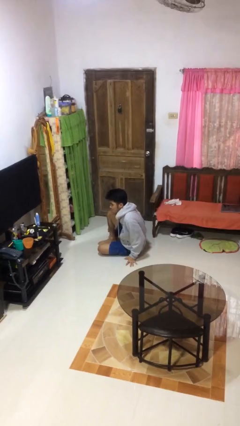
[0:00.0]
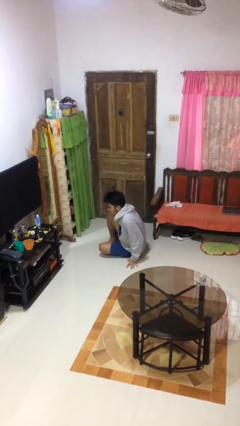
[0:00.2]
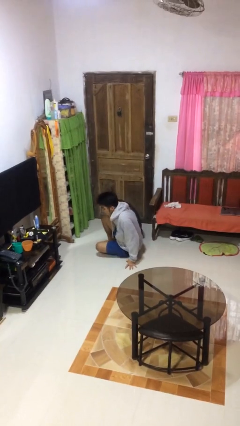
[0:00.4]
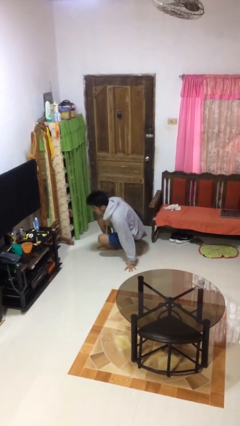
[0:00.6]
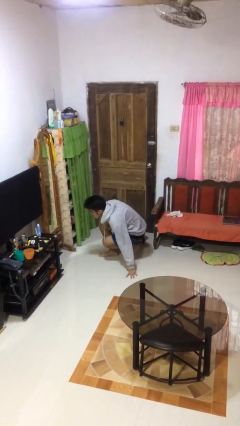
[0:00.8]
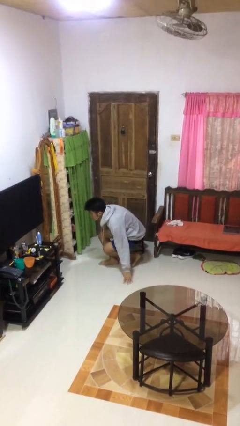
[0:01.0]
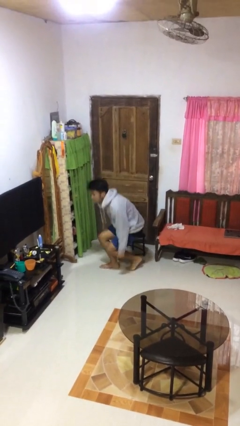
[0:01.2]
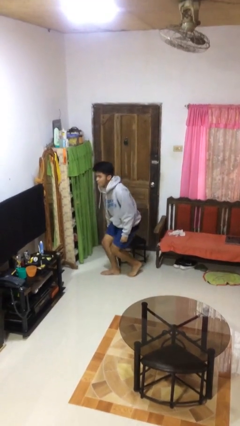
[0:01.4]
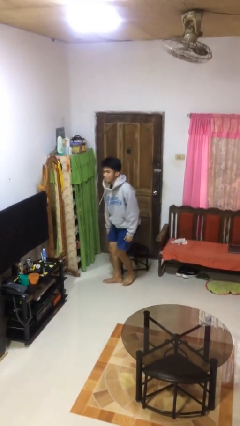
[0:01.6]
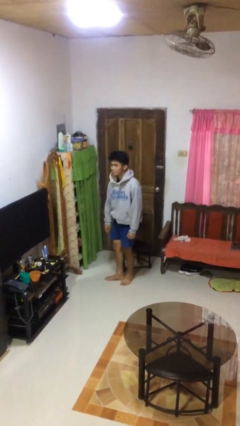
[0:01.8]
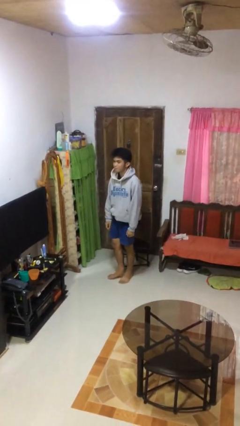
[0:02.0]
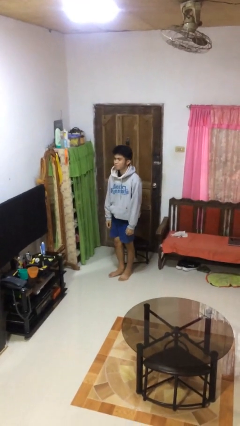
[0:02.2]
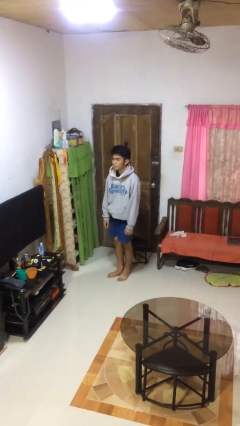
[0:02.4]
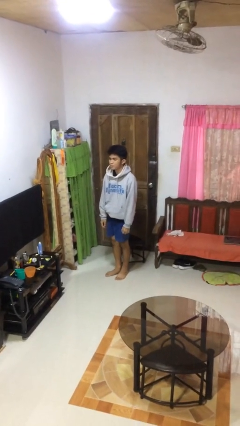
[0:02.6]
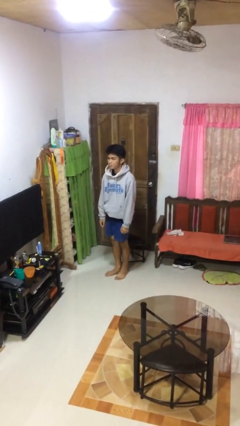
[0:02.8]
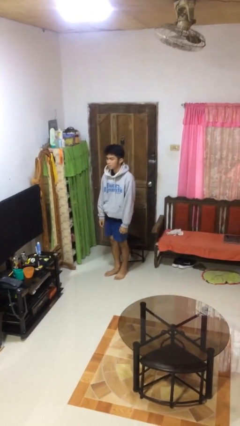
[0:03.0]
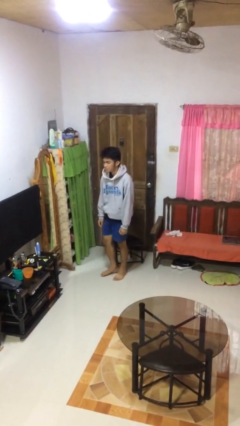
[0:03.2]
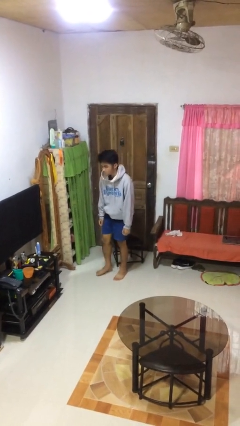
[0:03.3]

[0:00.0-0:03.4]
person stands up from floor

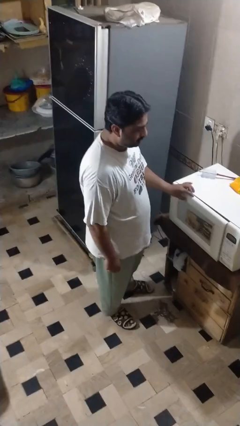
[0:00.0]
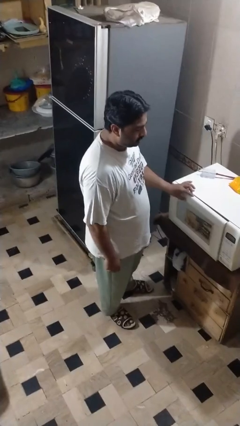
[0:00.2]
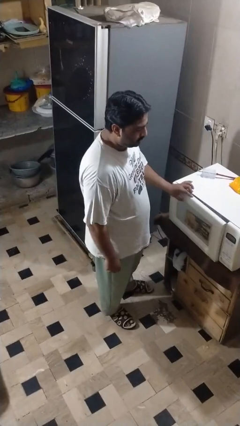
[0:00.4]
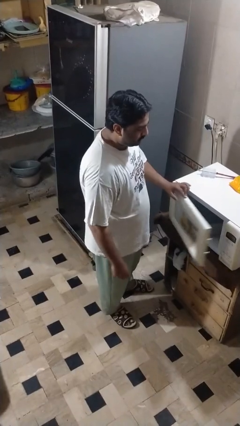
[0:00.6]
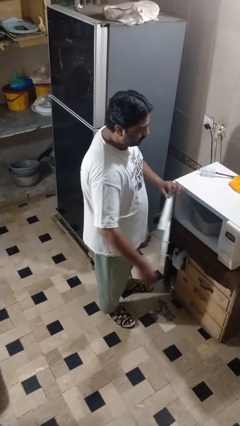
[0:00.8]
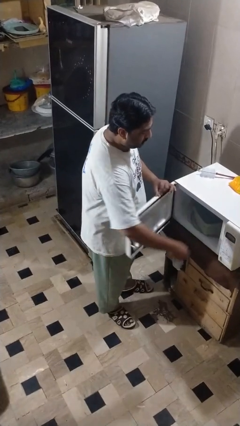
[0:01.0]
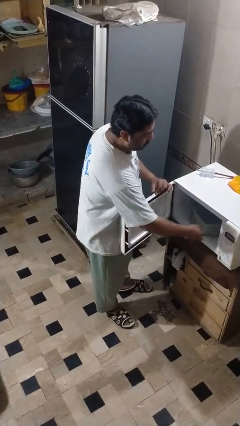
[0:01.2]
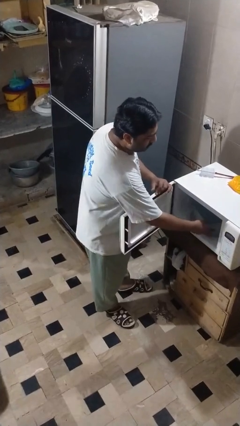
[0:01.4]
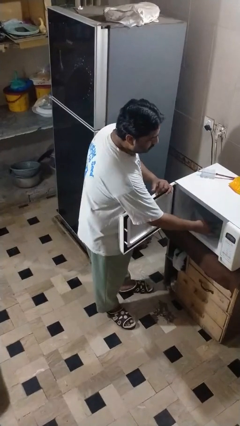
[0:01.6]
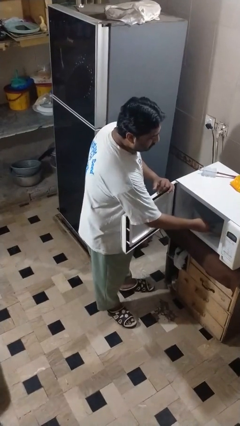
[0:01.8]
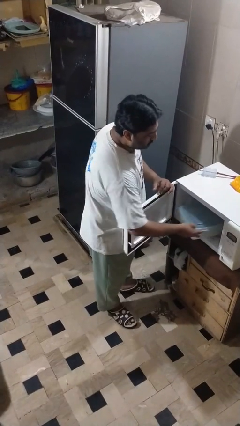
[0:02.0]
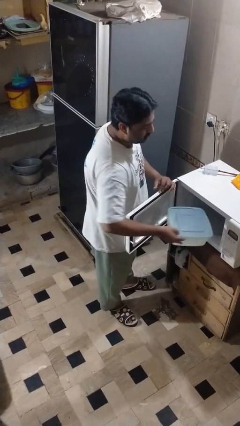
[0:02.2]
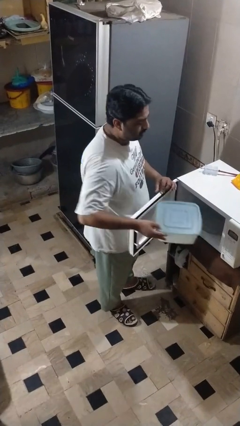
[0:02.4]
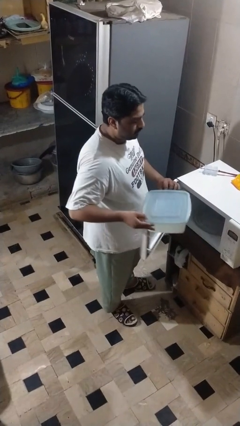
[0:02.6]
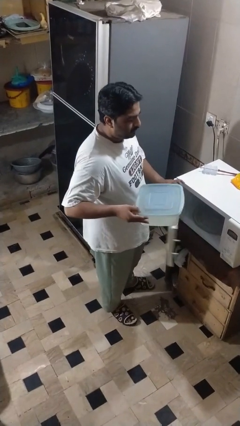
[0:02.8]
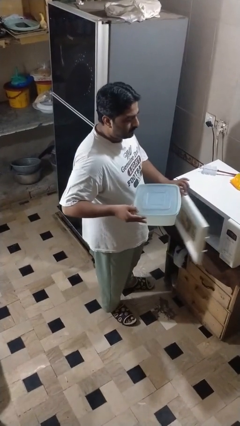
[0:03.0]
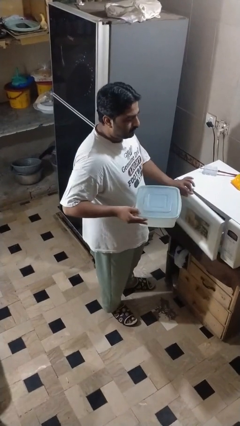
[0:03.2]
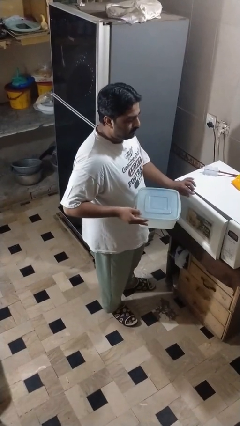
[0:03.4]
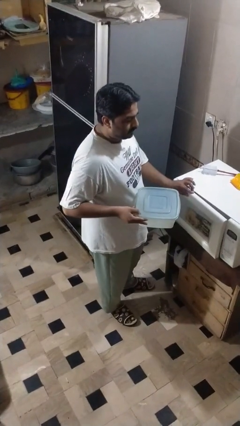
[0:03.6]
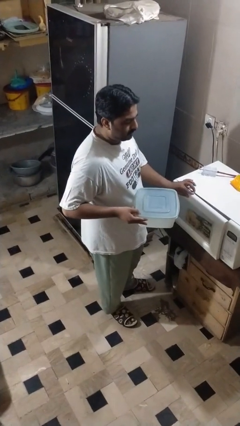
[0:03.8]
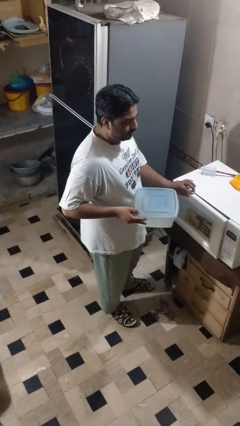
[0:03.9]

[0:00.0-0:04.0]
person takes object from microwave

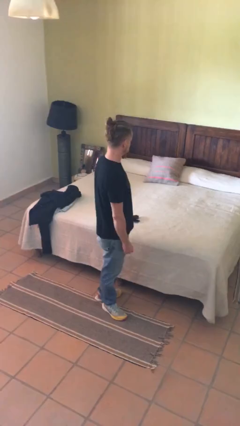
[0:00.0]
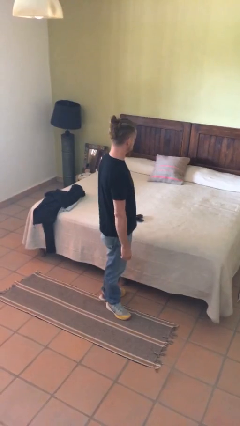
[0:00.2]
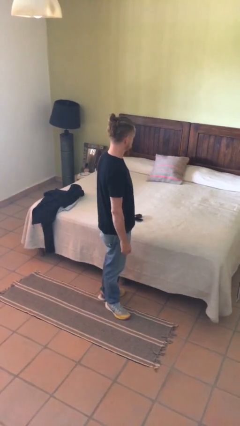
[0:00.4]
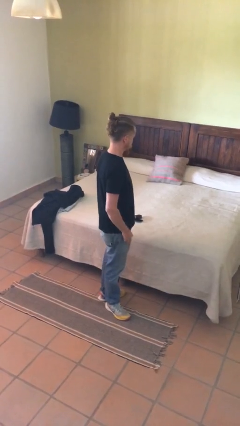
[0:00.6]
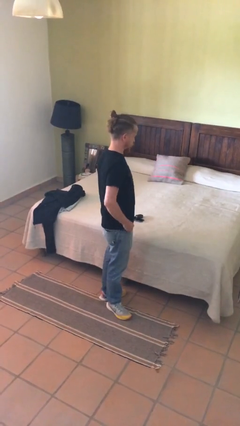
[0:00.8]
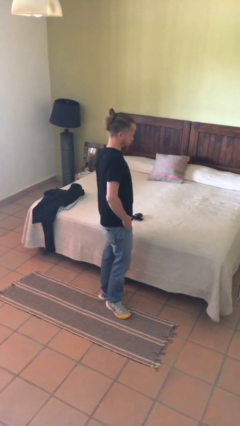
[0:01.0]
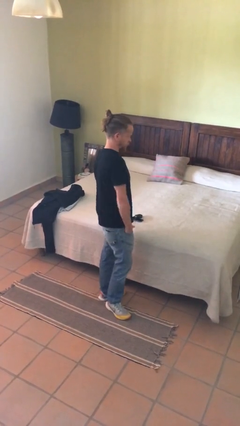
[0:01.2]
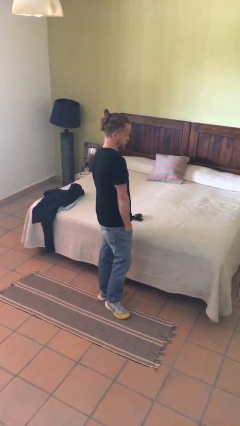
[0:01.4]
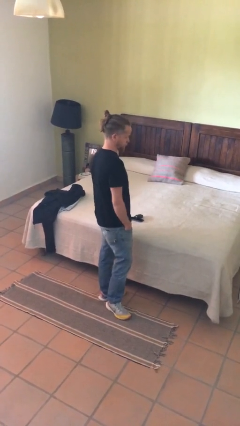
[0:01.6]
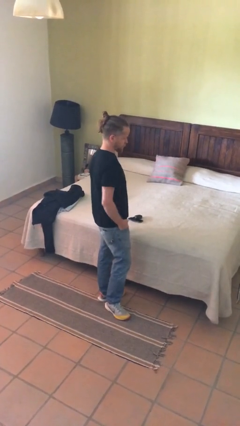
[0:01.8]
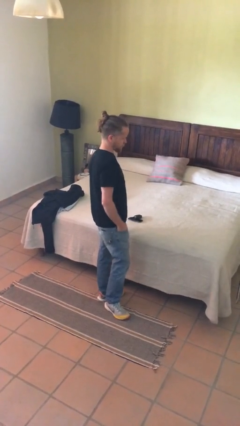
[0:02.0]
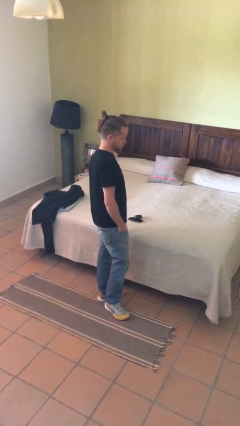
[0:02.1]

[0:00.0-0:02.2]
person puts hands in back pockets

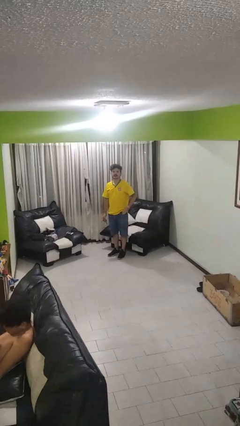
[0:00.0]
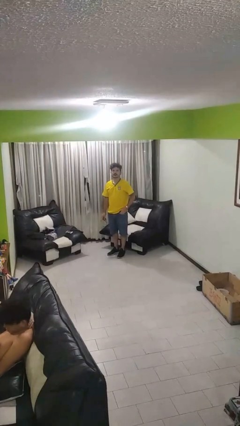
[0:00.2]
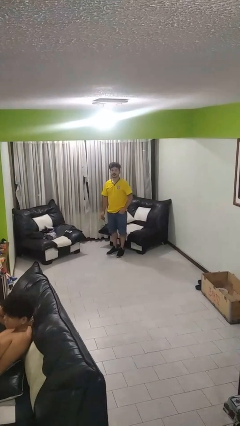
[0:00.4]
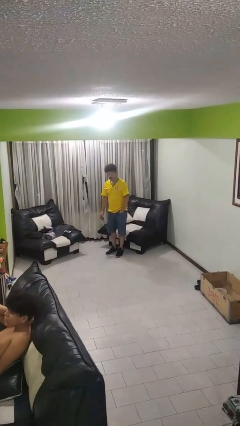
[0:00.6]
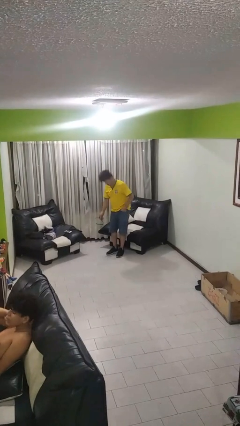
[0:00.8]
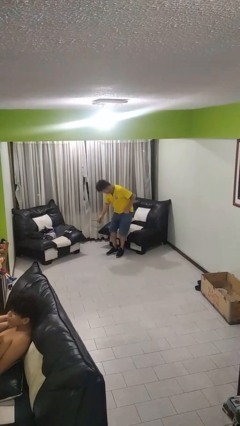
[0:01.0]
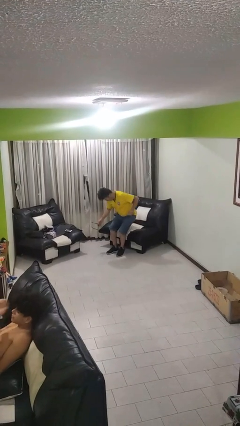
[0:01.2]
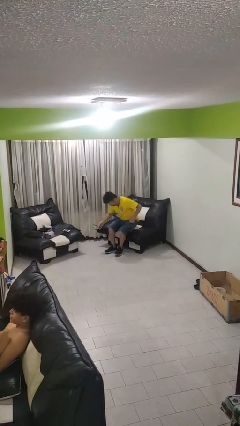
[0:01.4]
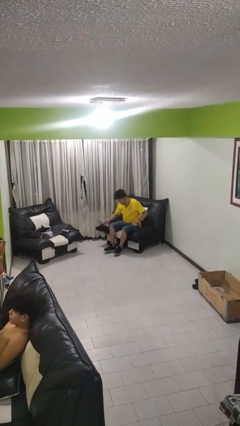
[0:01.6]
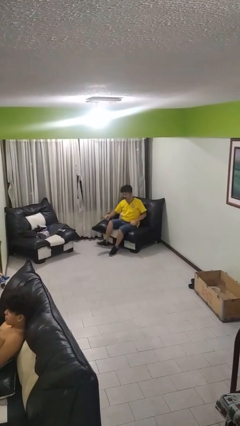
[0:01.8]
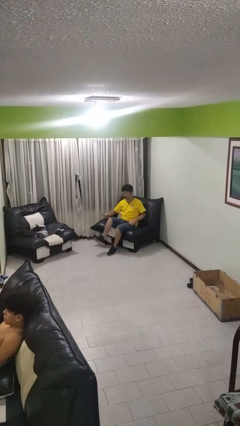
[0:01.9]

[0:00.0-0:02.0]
person lies down on couch

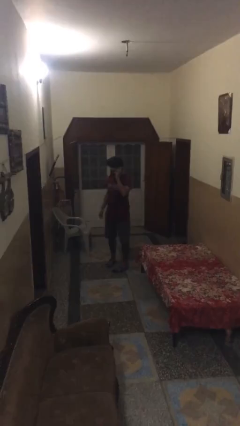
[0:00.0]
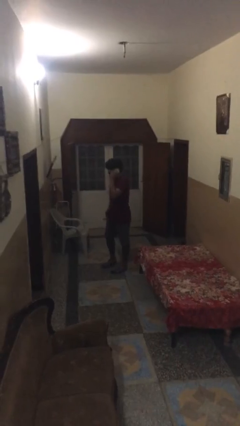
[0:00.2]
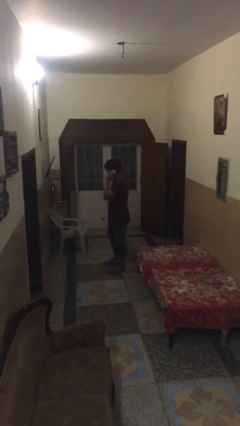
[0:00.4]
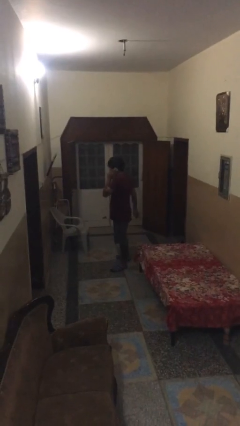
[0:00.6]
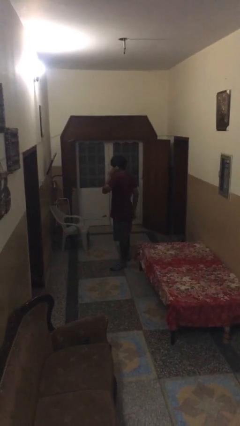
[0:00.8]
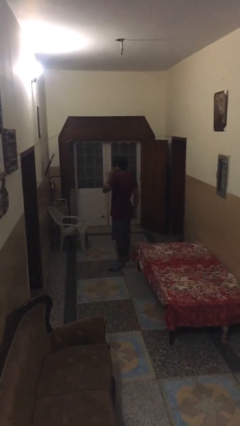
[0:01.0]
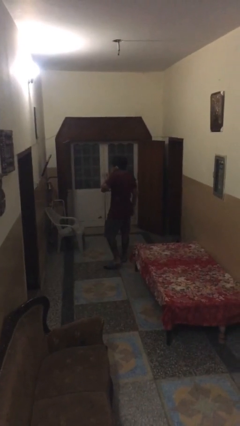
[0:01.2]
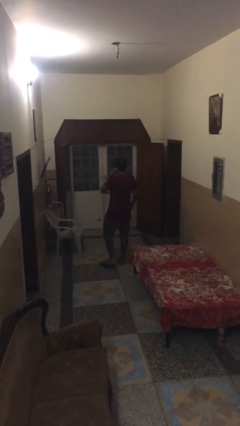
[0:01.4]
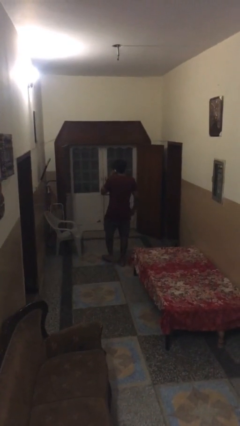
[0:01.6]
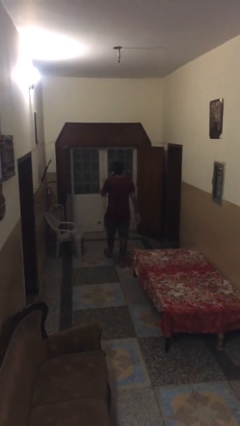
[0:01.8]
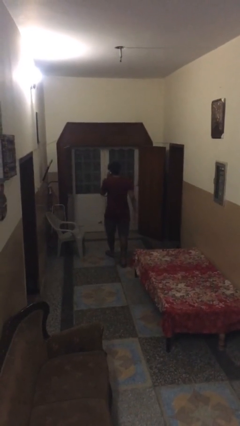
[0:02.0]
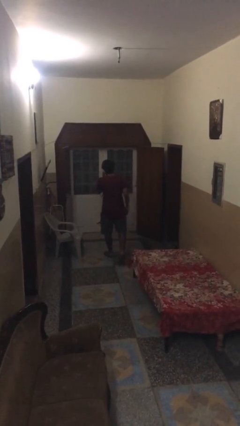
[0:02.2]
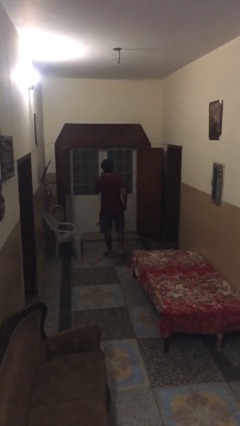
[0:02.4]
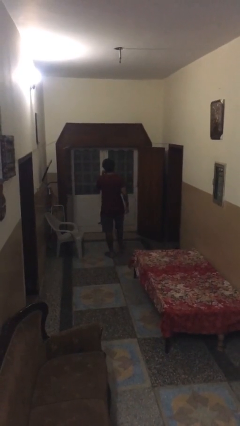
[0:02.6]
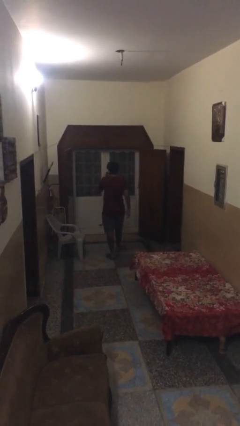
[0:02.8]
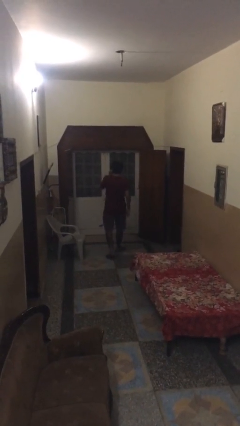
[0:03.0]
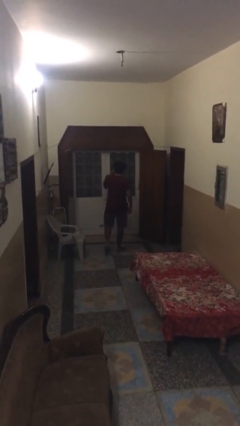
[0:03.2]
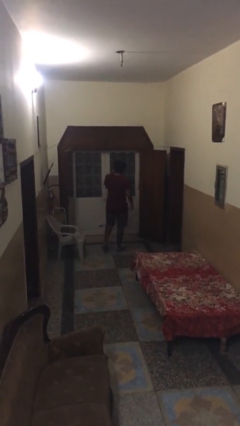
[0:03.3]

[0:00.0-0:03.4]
person talks on phone

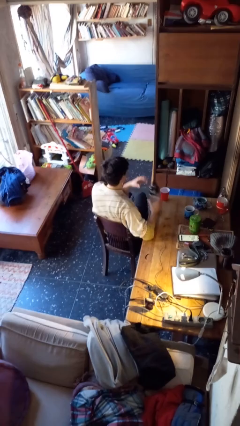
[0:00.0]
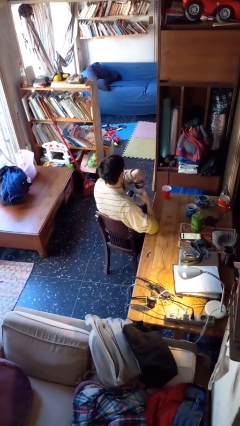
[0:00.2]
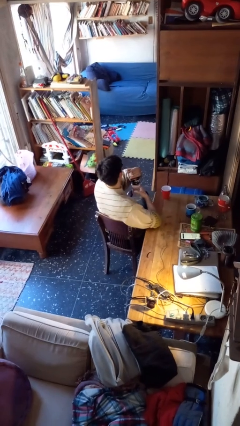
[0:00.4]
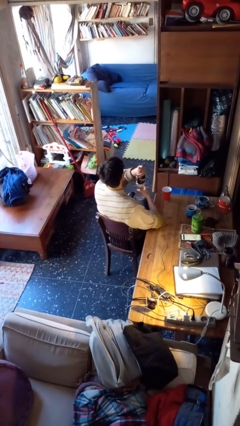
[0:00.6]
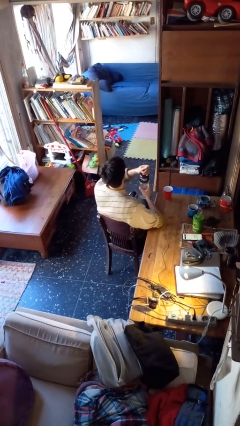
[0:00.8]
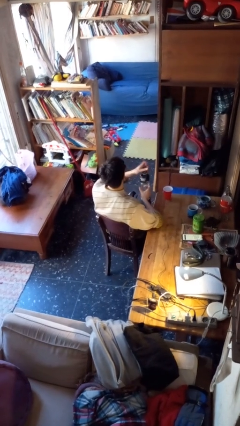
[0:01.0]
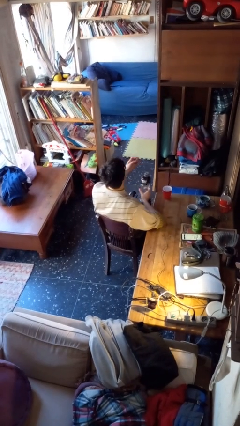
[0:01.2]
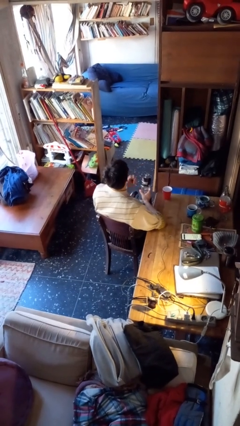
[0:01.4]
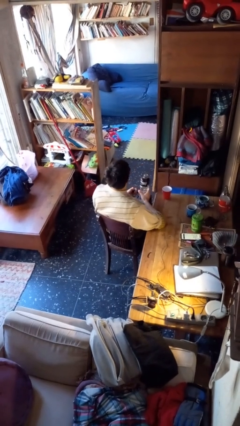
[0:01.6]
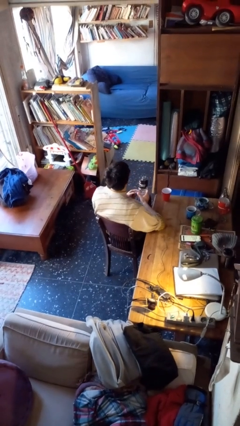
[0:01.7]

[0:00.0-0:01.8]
person unscrews lid from bottle
